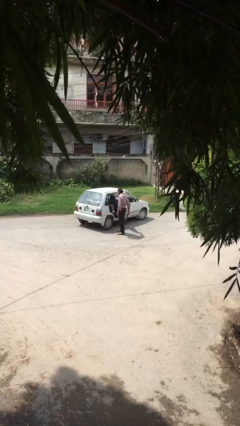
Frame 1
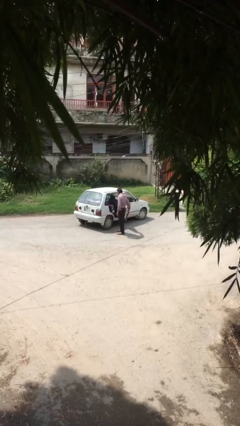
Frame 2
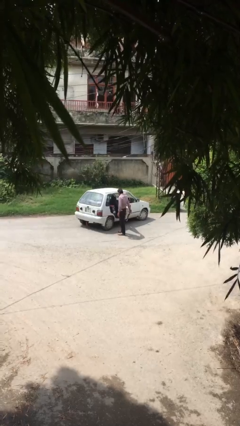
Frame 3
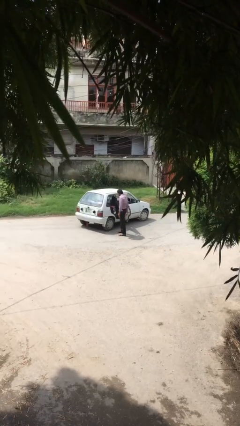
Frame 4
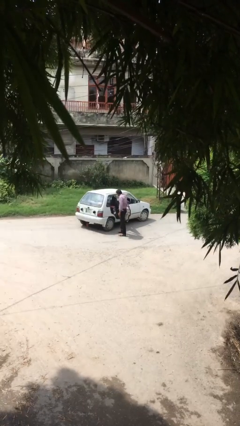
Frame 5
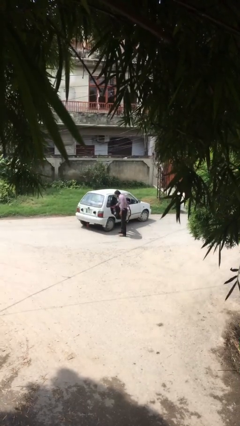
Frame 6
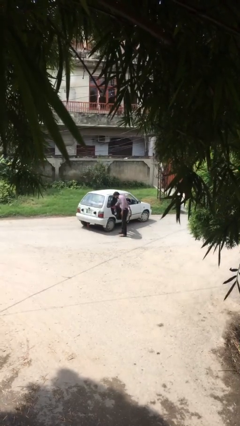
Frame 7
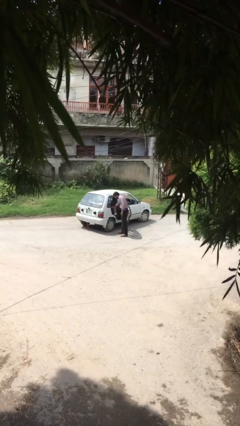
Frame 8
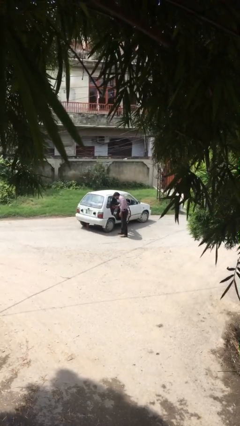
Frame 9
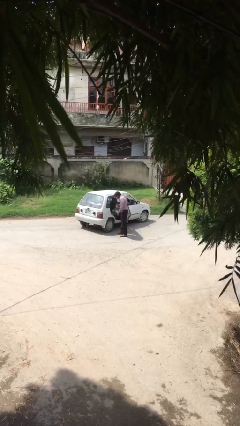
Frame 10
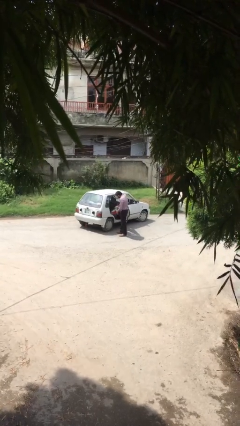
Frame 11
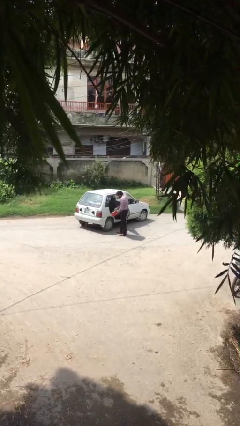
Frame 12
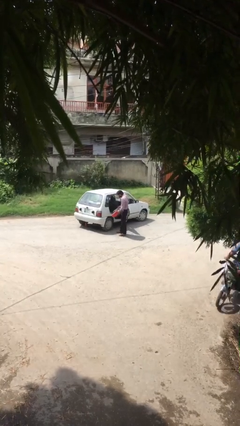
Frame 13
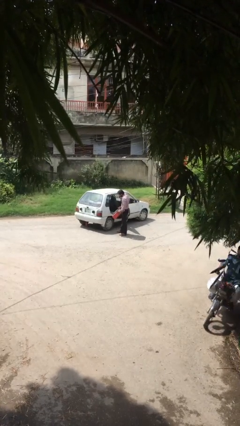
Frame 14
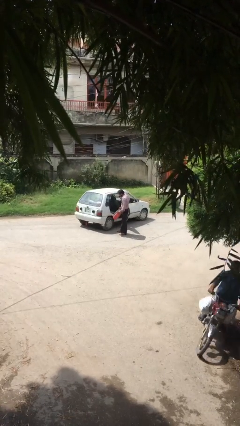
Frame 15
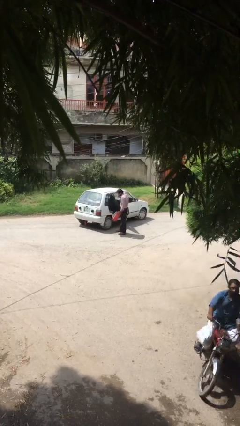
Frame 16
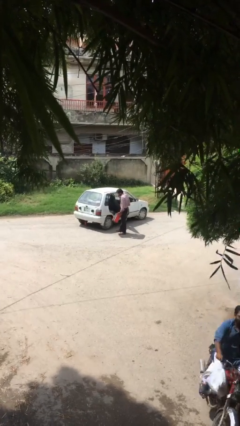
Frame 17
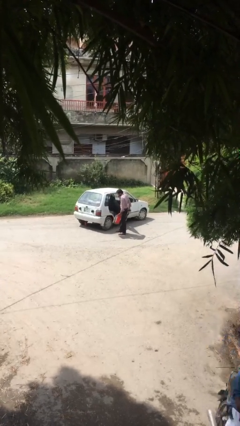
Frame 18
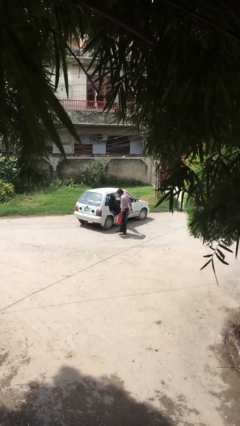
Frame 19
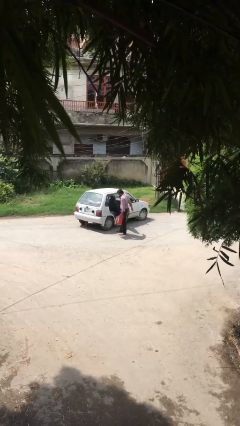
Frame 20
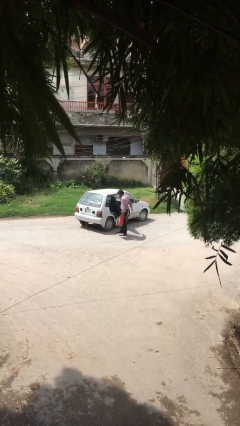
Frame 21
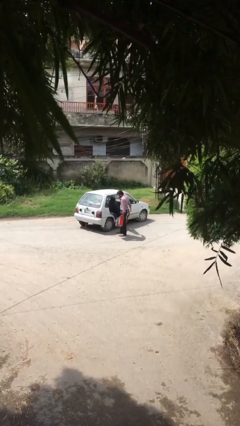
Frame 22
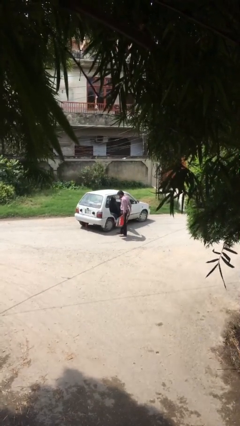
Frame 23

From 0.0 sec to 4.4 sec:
person unloads car

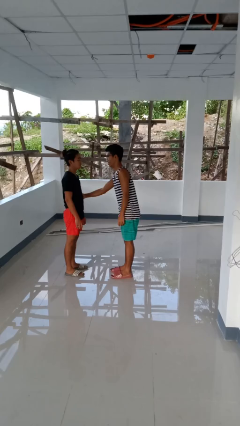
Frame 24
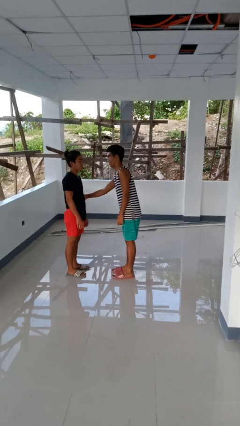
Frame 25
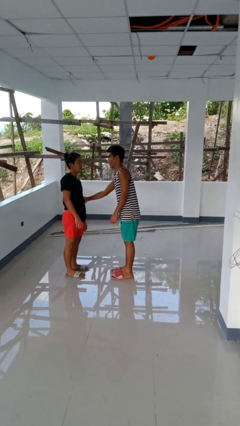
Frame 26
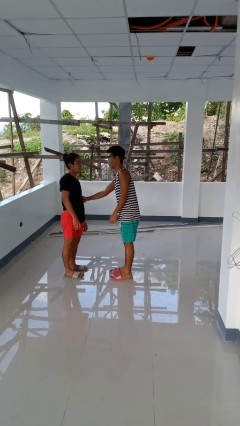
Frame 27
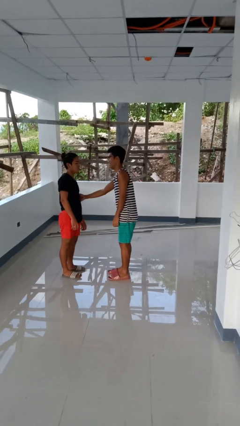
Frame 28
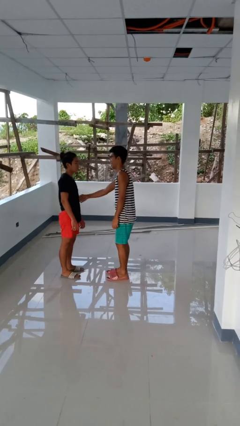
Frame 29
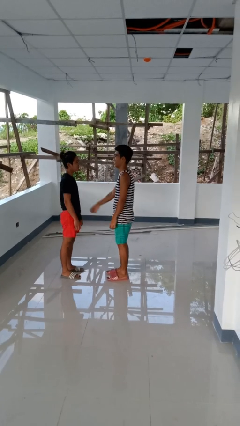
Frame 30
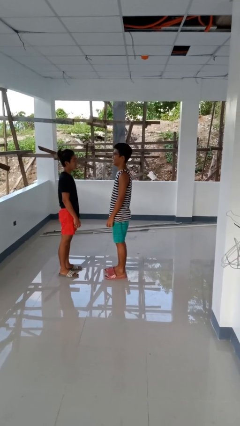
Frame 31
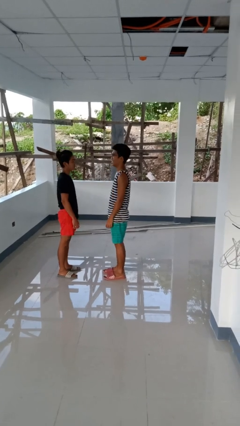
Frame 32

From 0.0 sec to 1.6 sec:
person tickles person

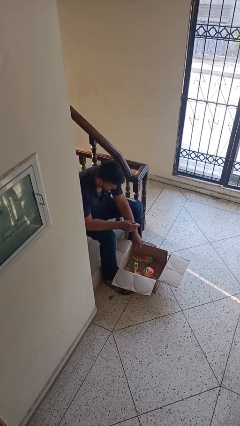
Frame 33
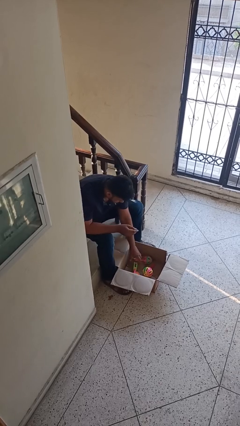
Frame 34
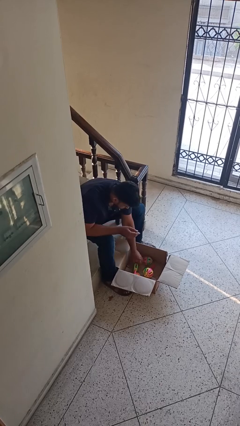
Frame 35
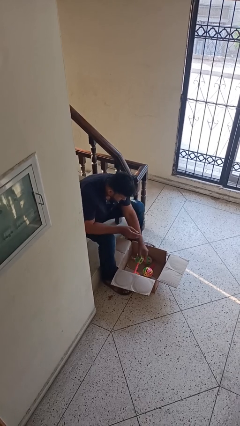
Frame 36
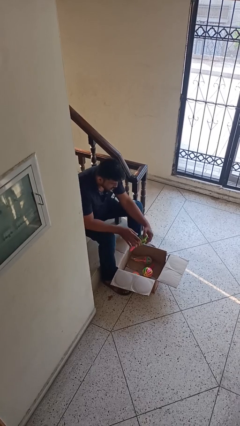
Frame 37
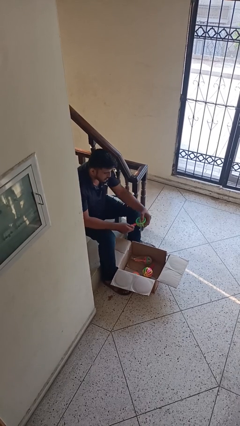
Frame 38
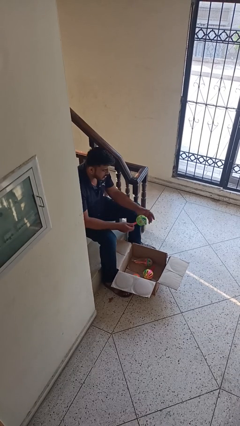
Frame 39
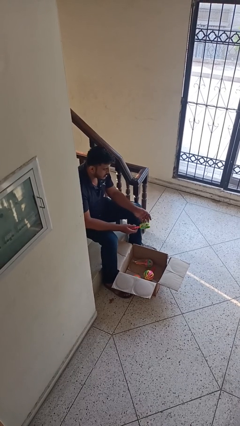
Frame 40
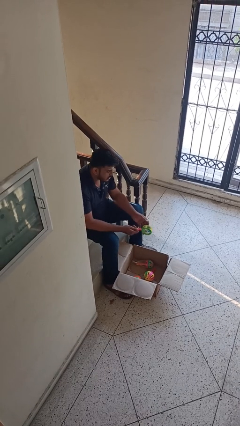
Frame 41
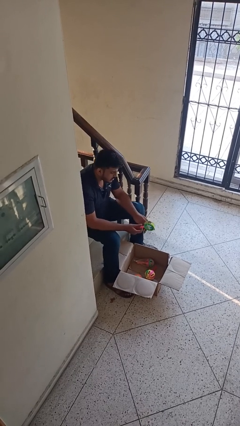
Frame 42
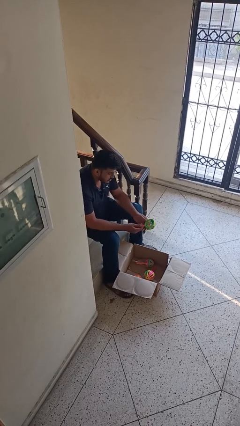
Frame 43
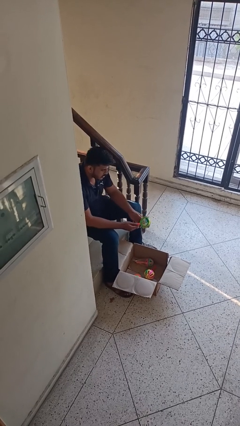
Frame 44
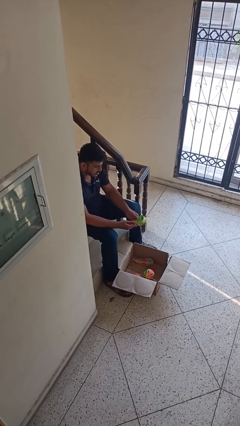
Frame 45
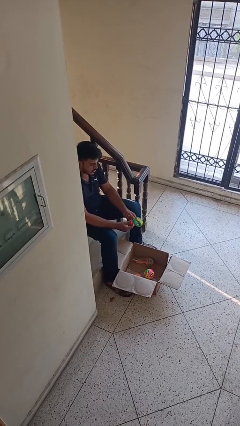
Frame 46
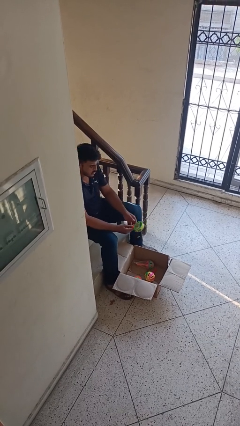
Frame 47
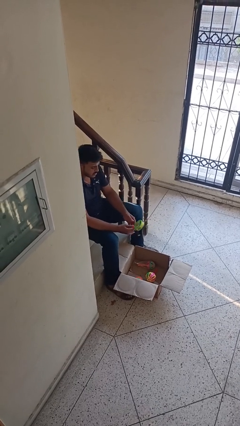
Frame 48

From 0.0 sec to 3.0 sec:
person takes object from box

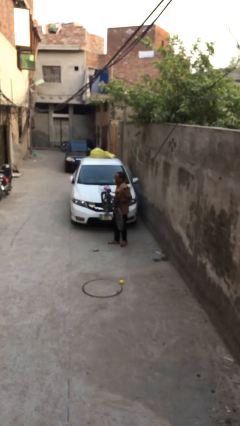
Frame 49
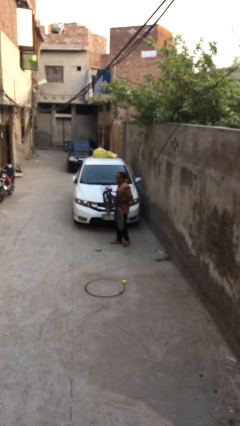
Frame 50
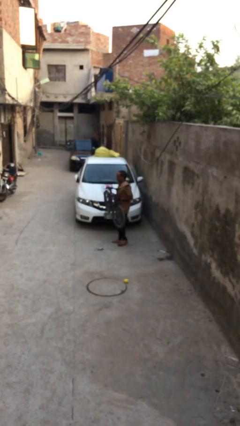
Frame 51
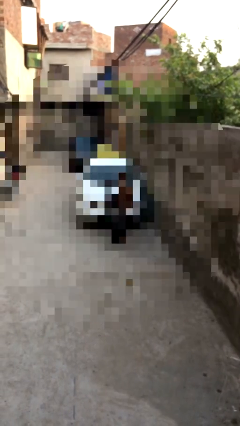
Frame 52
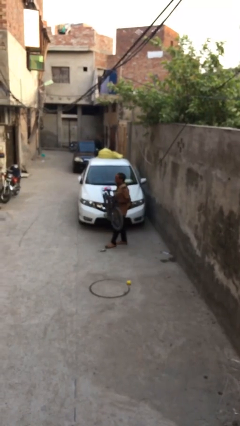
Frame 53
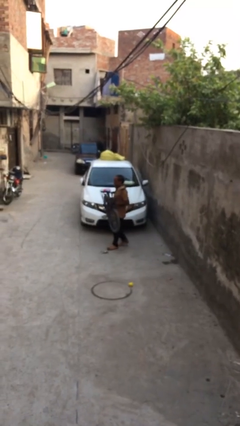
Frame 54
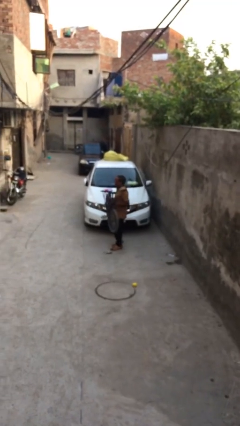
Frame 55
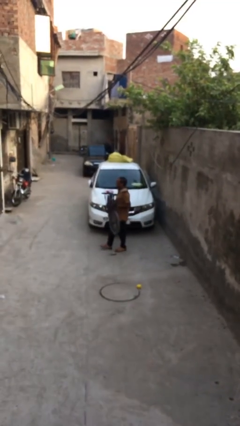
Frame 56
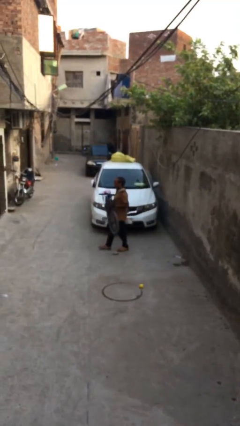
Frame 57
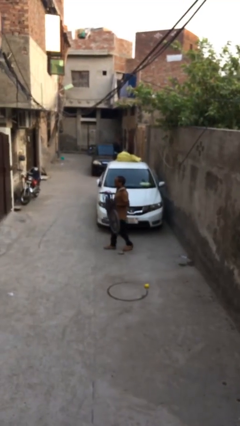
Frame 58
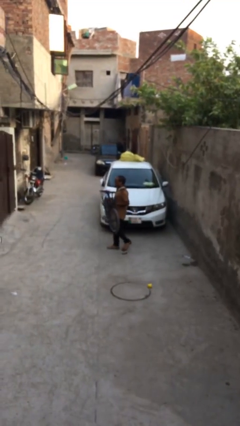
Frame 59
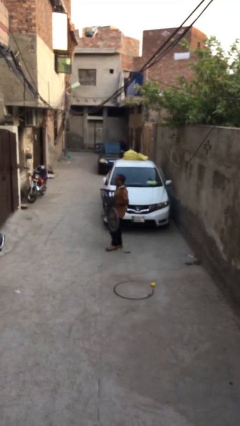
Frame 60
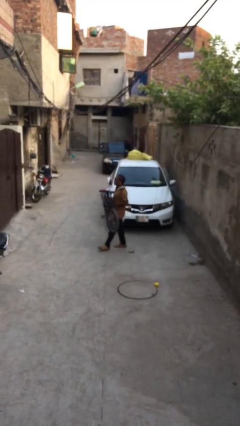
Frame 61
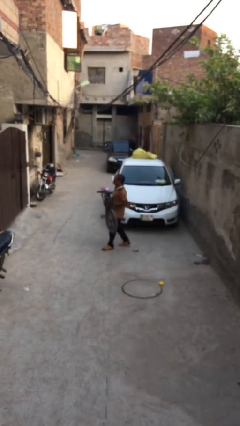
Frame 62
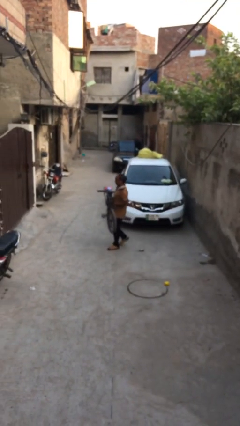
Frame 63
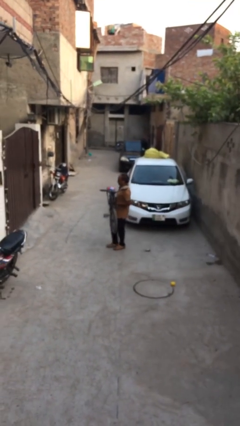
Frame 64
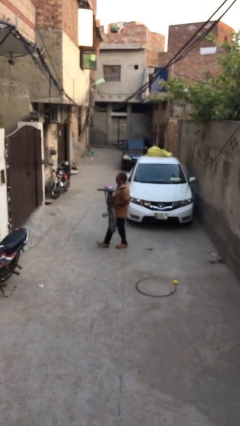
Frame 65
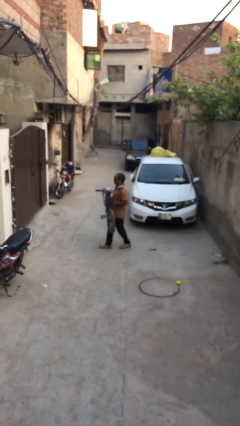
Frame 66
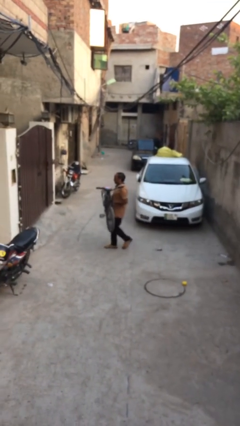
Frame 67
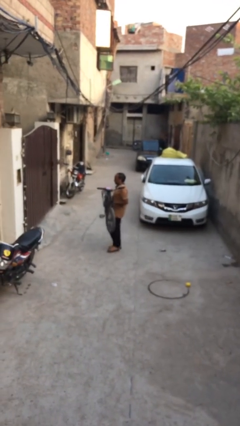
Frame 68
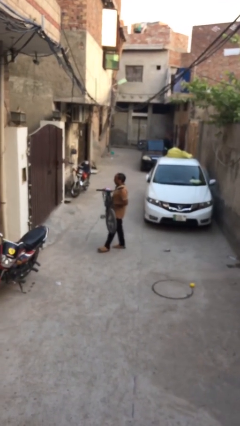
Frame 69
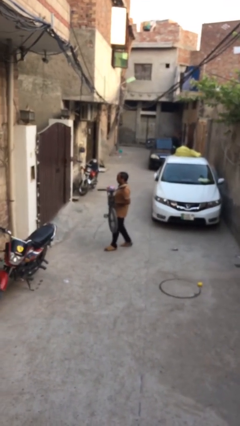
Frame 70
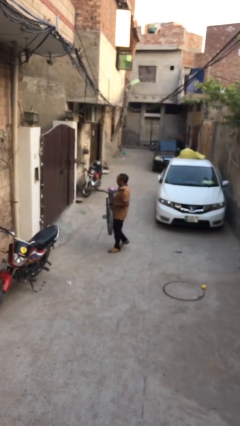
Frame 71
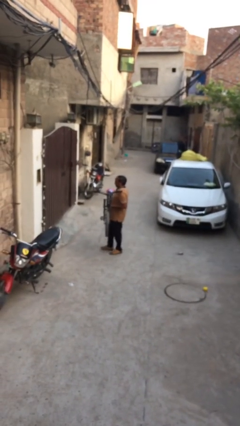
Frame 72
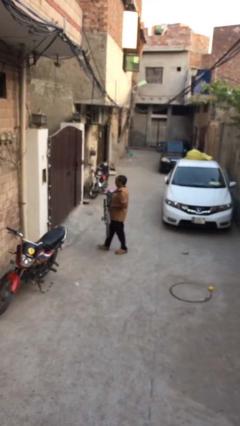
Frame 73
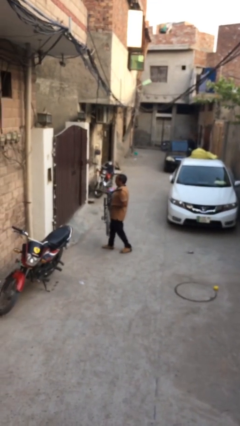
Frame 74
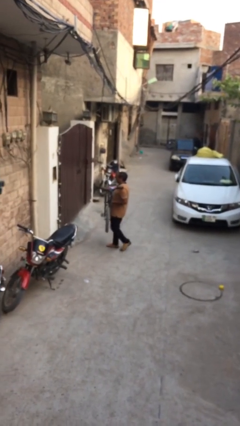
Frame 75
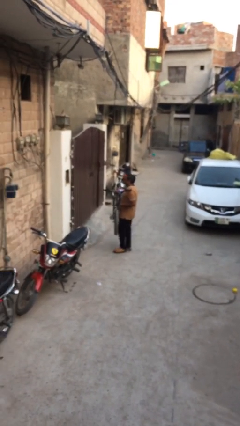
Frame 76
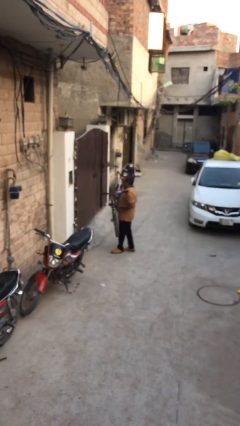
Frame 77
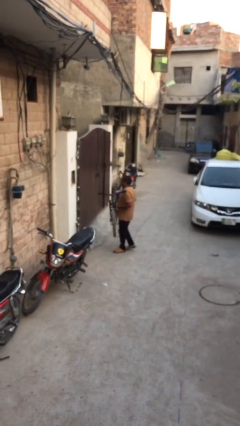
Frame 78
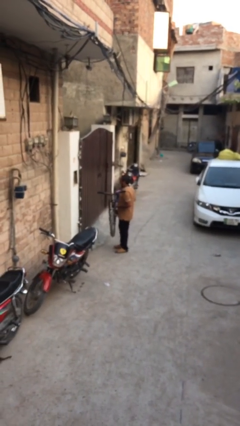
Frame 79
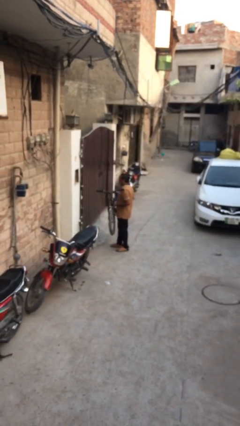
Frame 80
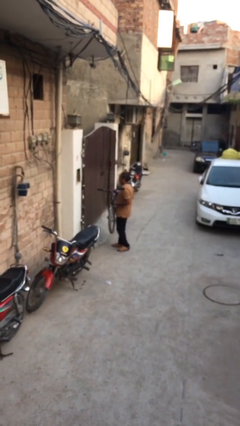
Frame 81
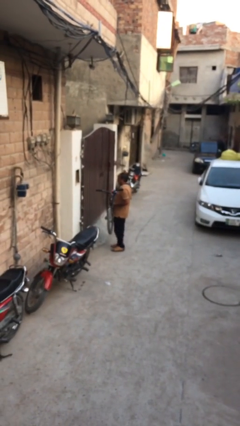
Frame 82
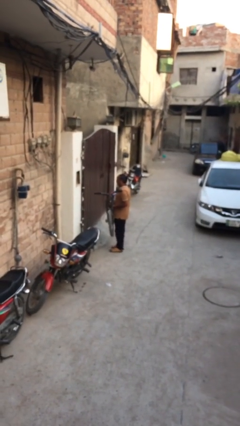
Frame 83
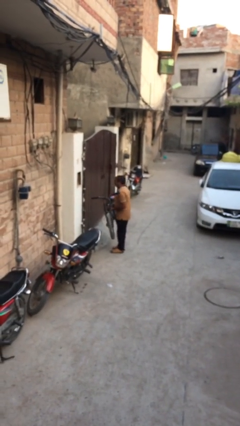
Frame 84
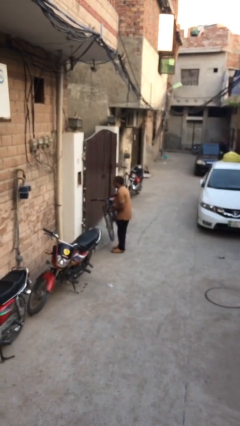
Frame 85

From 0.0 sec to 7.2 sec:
person carries heavy object

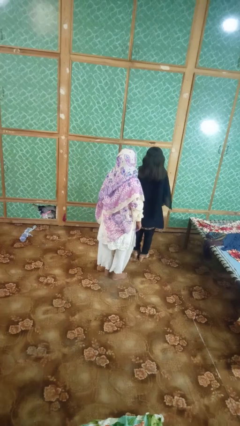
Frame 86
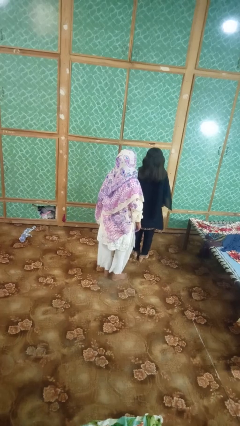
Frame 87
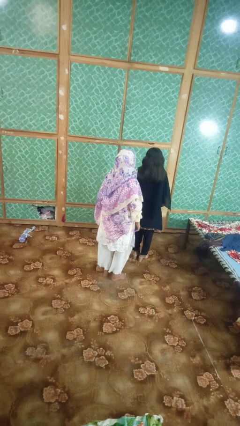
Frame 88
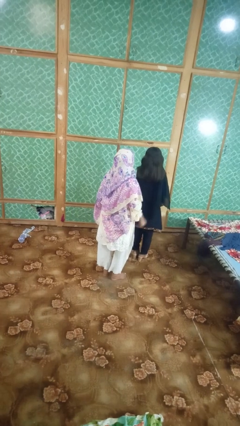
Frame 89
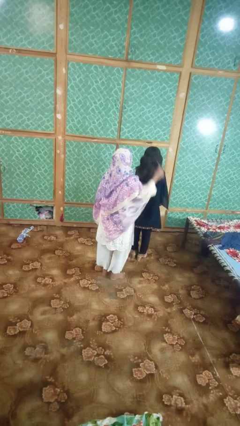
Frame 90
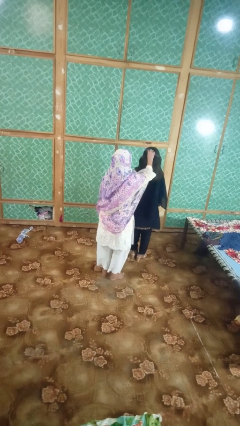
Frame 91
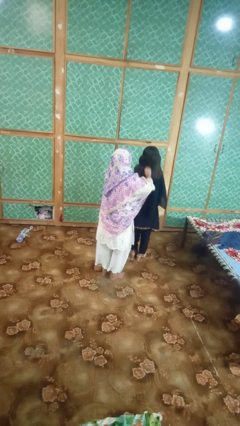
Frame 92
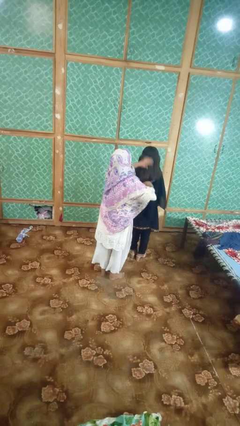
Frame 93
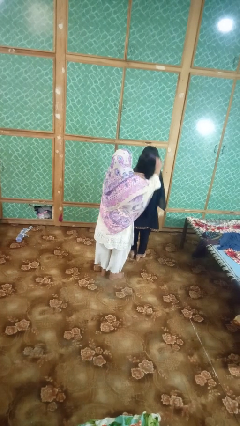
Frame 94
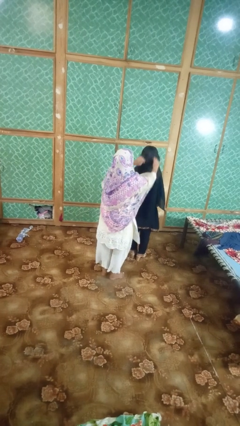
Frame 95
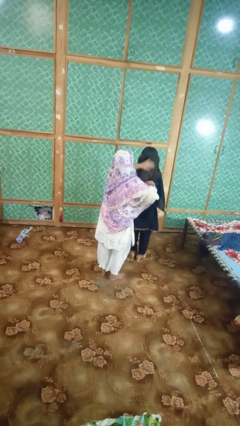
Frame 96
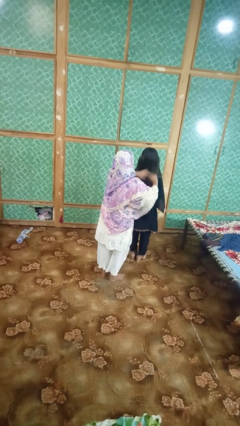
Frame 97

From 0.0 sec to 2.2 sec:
person brushes hair of person
